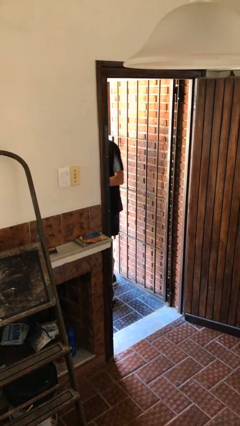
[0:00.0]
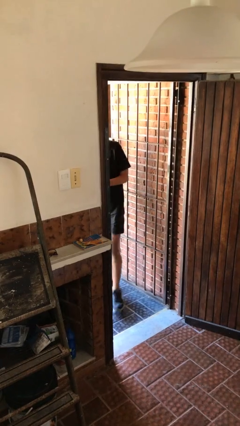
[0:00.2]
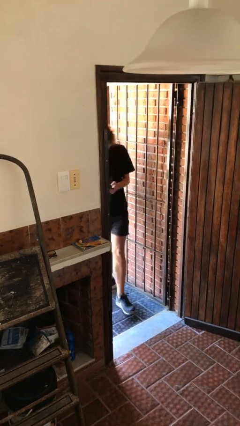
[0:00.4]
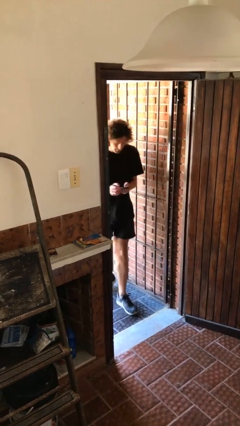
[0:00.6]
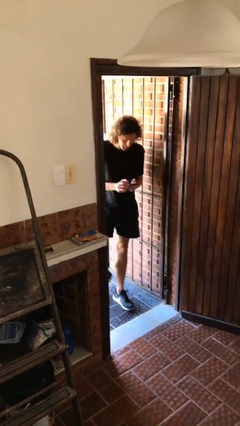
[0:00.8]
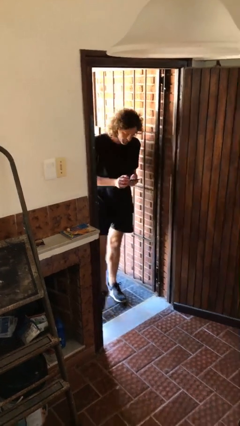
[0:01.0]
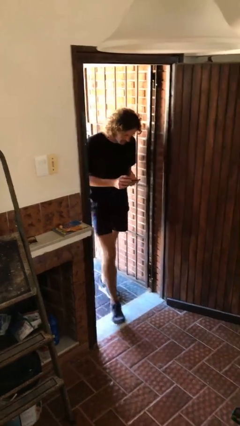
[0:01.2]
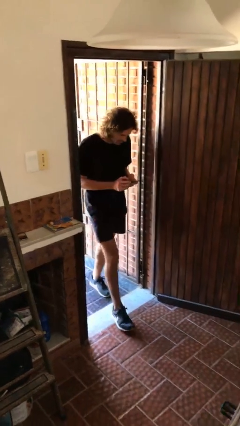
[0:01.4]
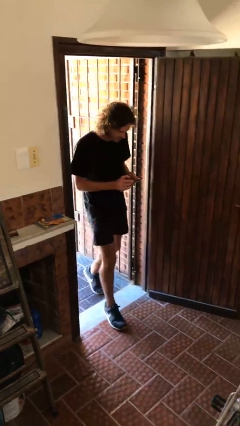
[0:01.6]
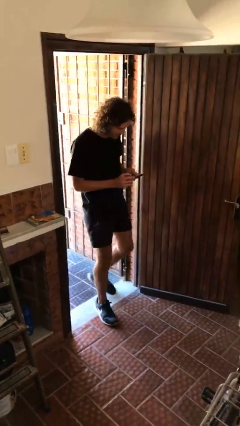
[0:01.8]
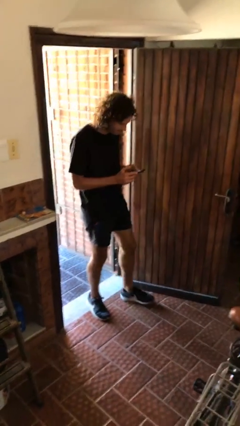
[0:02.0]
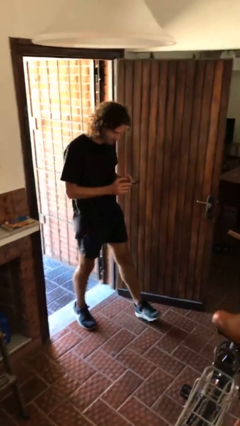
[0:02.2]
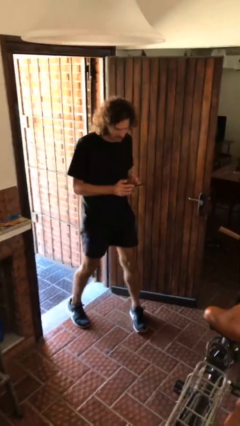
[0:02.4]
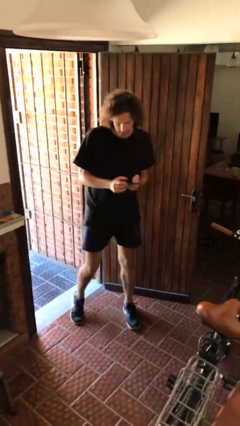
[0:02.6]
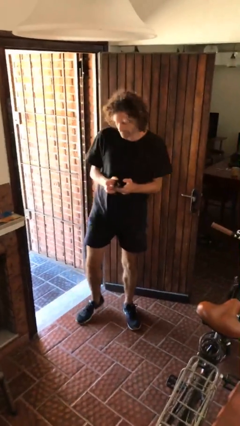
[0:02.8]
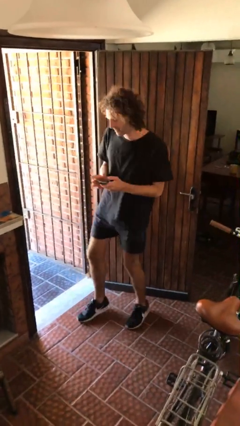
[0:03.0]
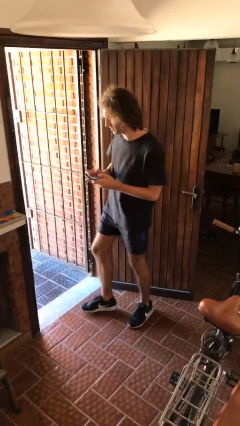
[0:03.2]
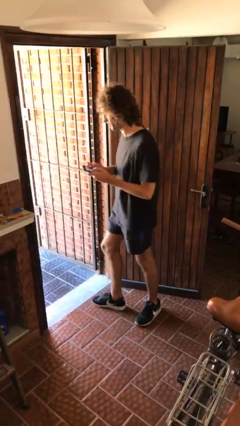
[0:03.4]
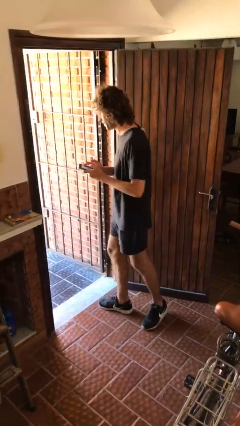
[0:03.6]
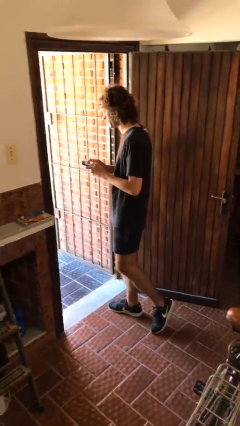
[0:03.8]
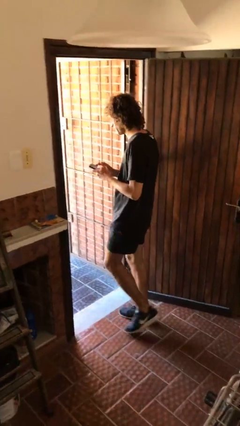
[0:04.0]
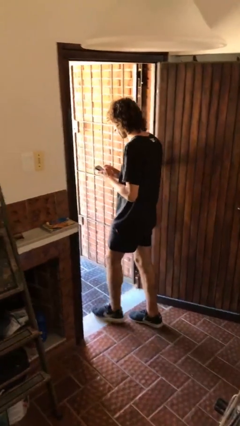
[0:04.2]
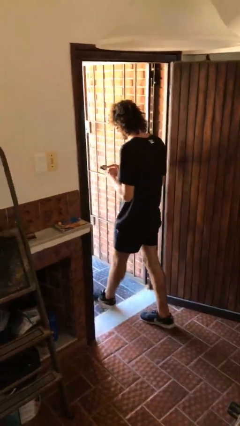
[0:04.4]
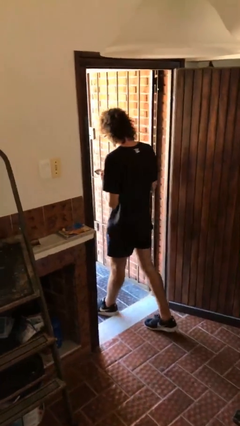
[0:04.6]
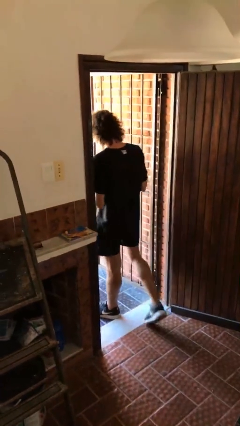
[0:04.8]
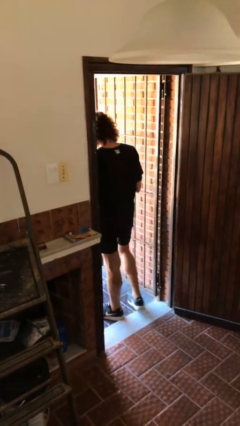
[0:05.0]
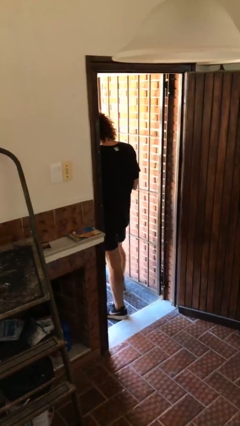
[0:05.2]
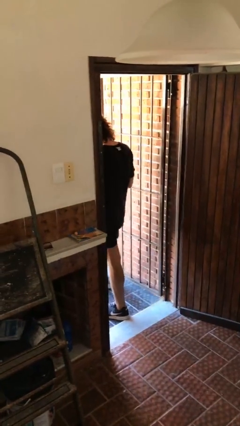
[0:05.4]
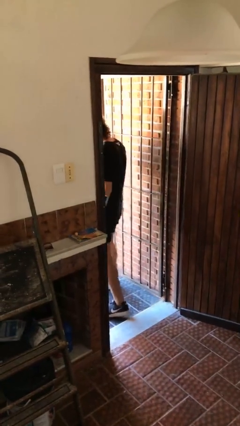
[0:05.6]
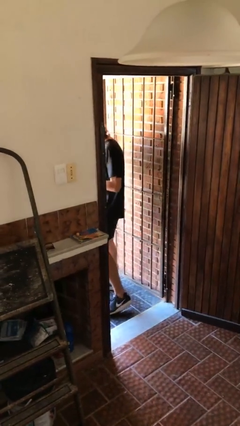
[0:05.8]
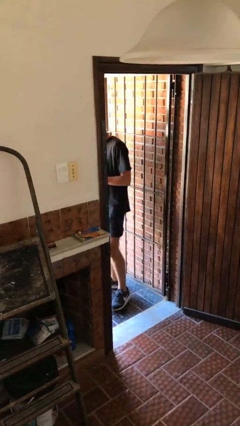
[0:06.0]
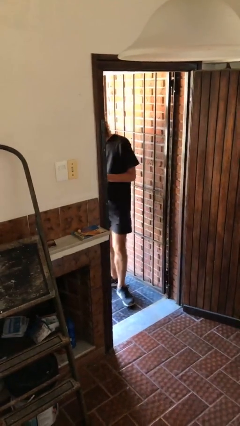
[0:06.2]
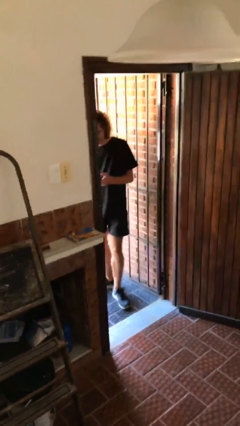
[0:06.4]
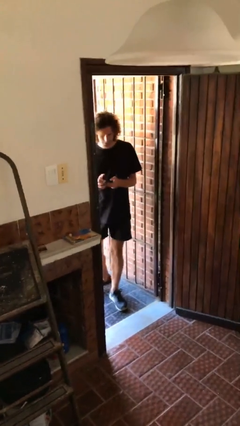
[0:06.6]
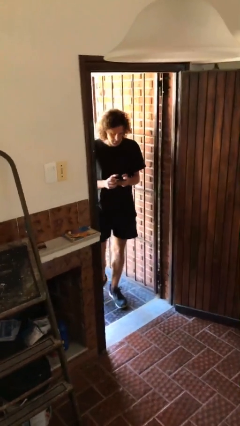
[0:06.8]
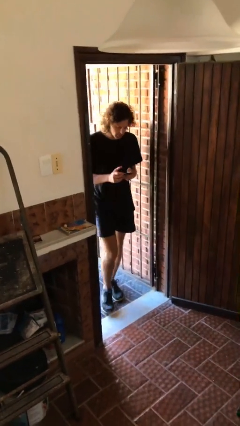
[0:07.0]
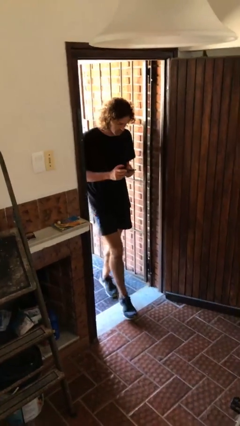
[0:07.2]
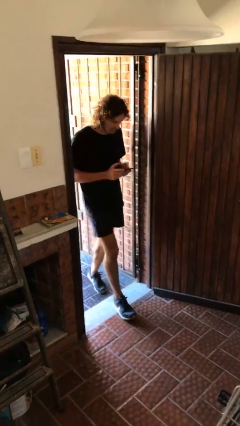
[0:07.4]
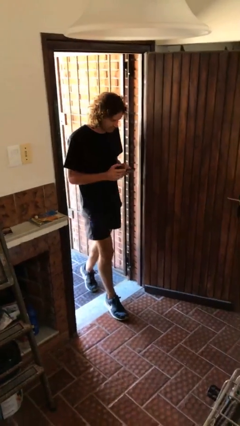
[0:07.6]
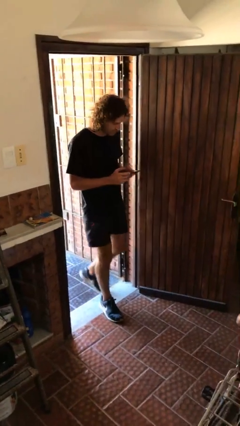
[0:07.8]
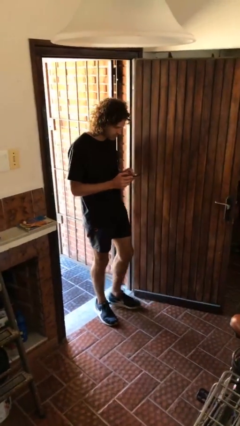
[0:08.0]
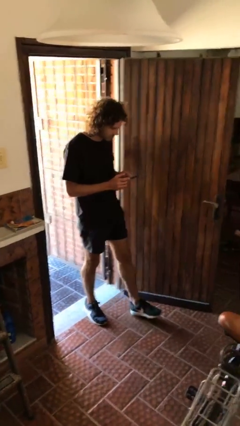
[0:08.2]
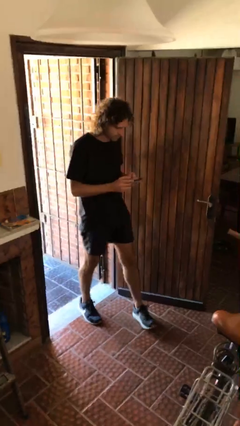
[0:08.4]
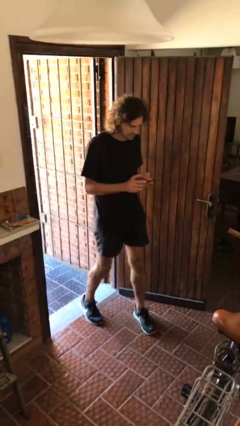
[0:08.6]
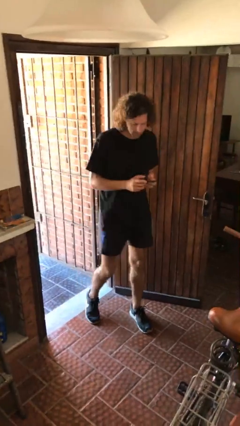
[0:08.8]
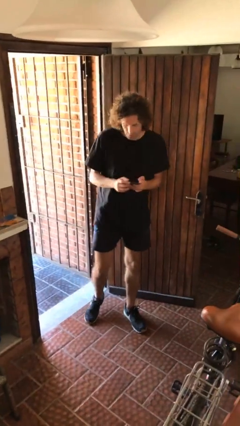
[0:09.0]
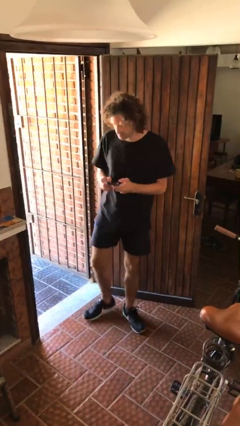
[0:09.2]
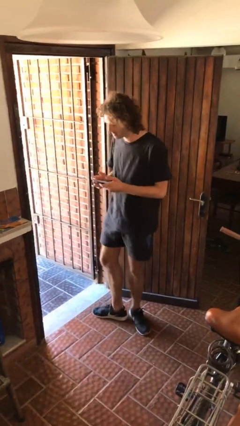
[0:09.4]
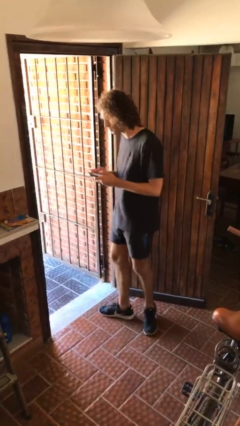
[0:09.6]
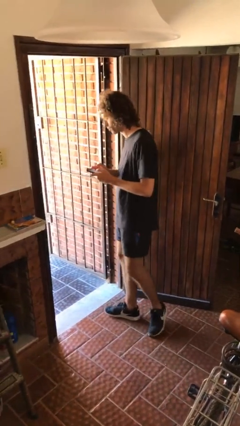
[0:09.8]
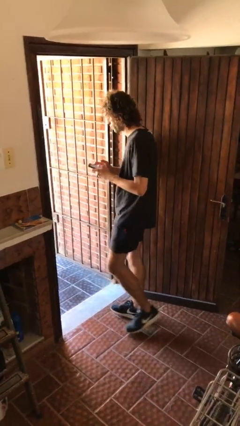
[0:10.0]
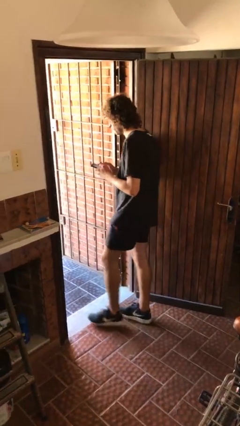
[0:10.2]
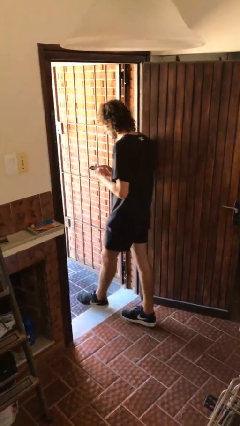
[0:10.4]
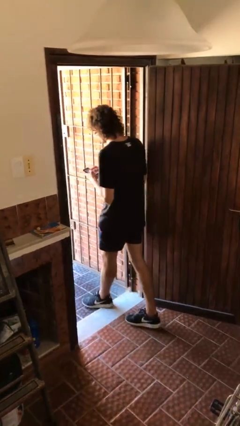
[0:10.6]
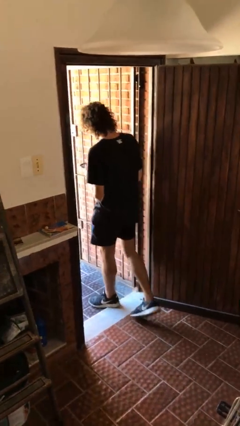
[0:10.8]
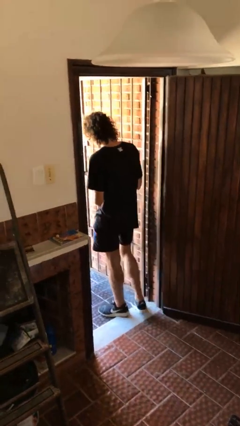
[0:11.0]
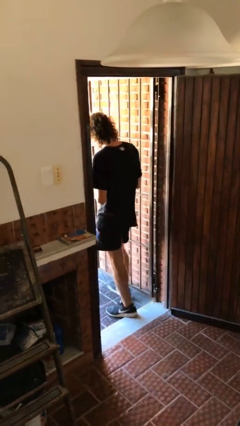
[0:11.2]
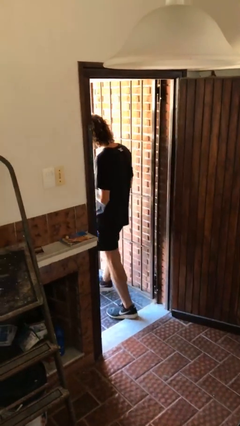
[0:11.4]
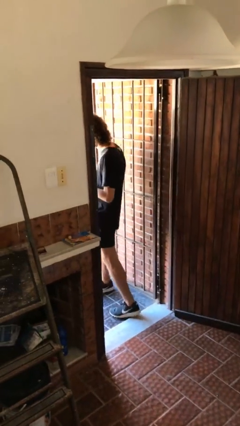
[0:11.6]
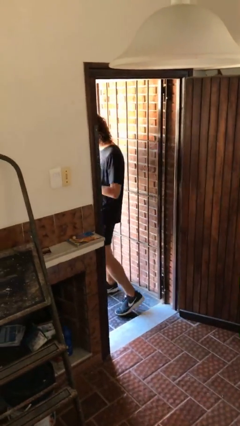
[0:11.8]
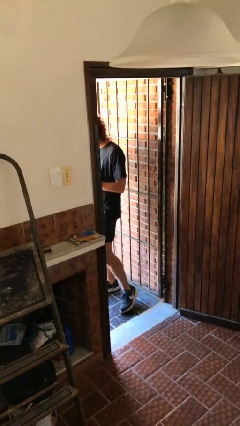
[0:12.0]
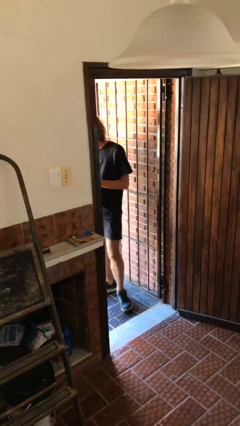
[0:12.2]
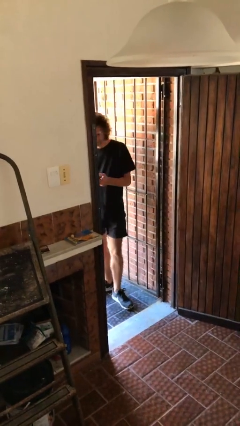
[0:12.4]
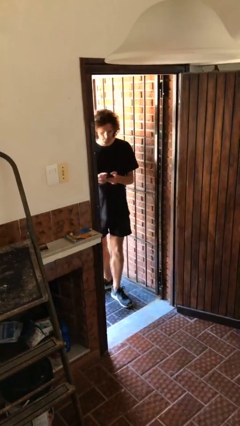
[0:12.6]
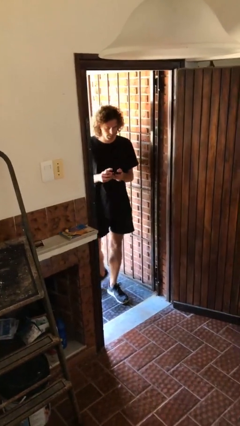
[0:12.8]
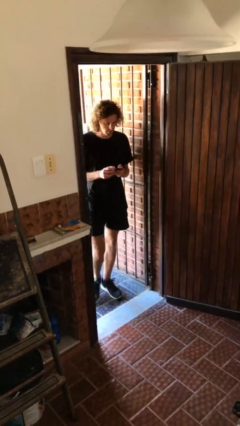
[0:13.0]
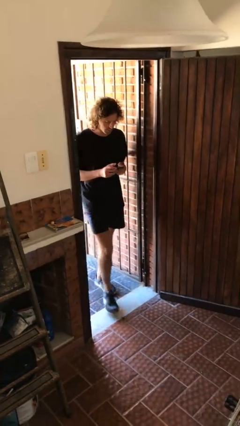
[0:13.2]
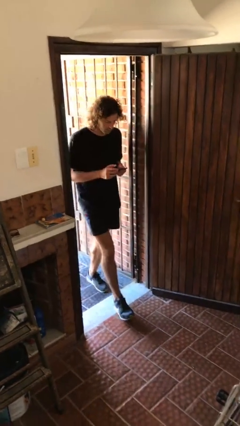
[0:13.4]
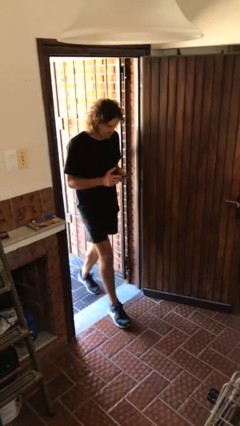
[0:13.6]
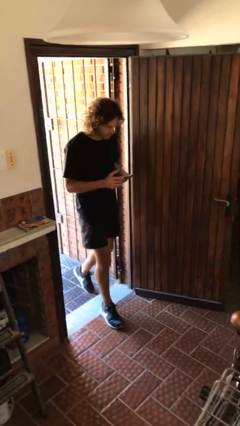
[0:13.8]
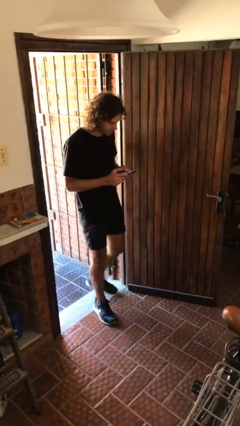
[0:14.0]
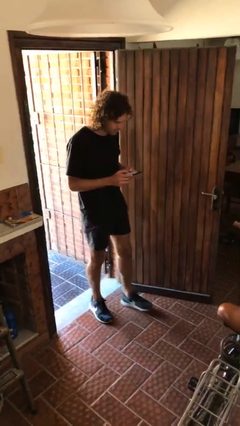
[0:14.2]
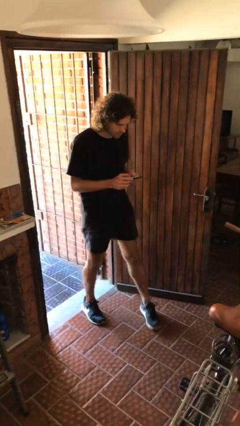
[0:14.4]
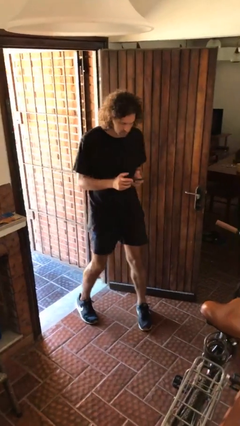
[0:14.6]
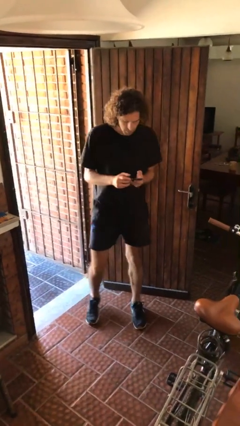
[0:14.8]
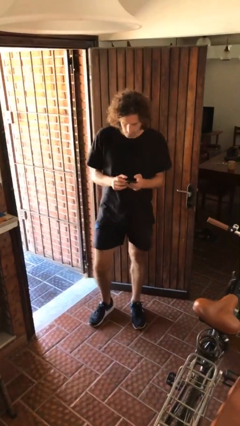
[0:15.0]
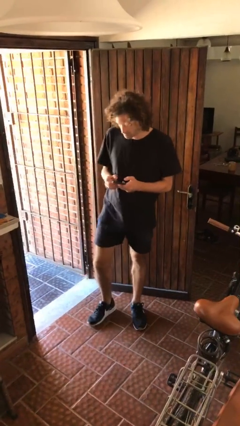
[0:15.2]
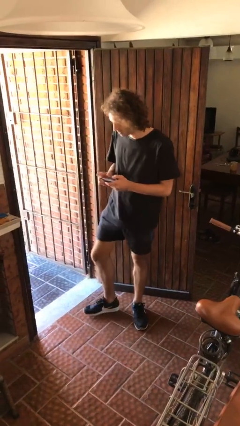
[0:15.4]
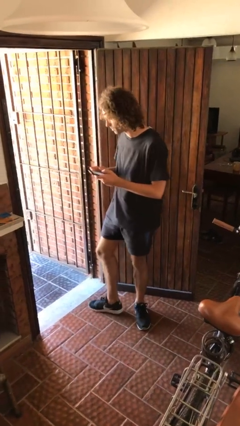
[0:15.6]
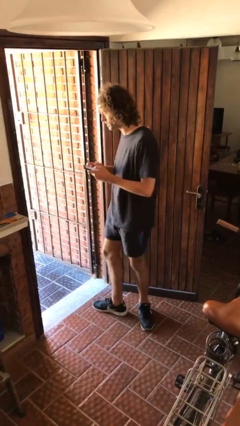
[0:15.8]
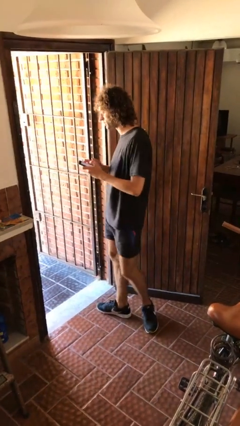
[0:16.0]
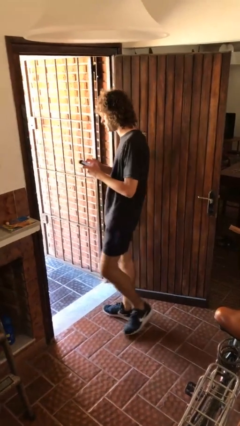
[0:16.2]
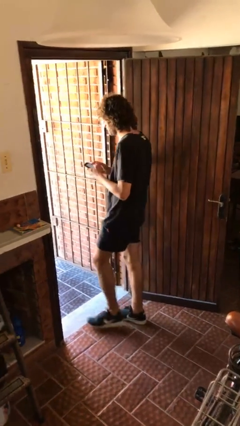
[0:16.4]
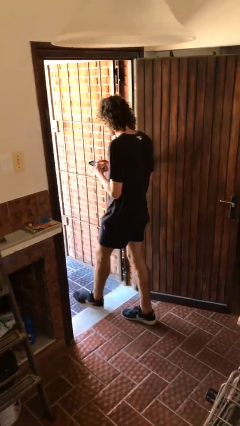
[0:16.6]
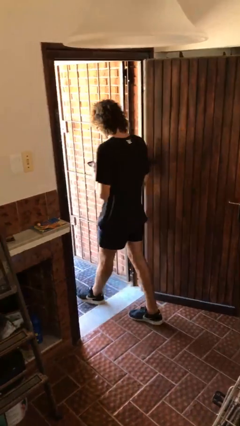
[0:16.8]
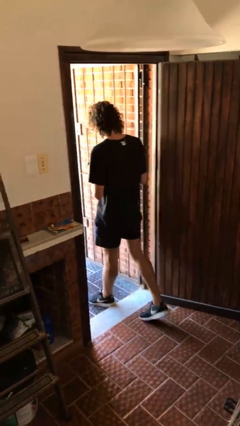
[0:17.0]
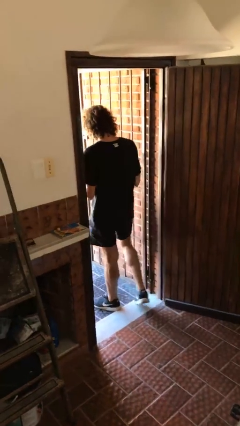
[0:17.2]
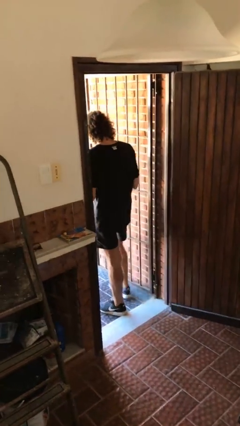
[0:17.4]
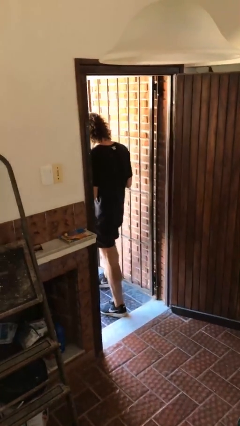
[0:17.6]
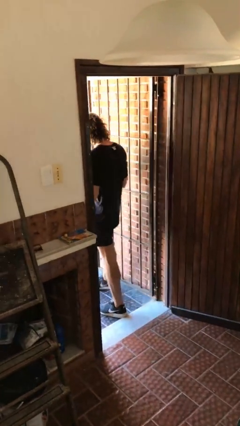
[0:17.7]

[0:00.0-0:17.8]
person texts on phone

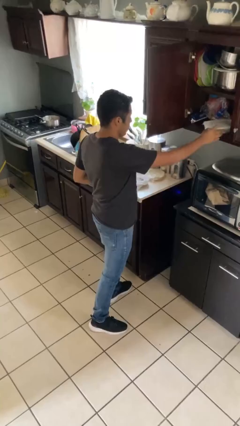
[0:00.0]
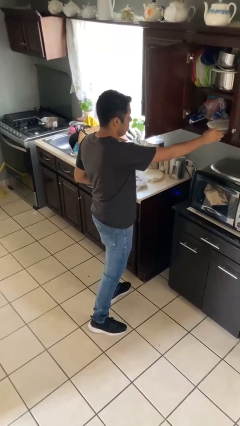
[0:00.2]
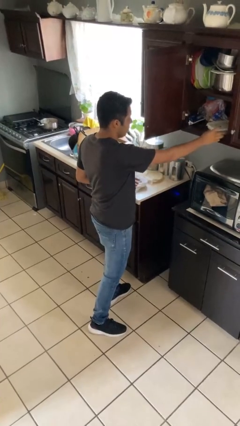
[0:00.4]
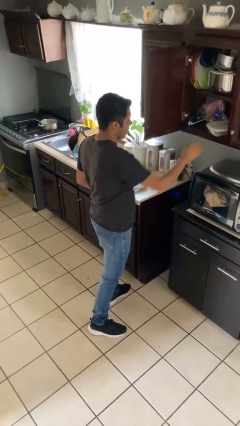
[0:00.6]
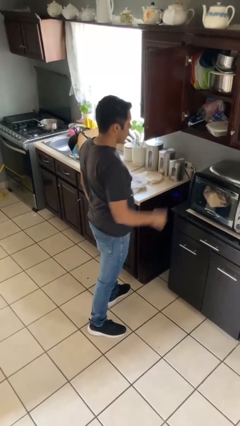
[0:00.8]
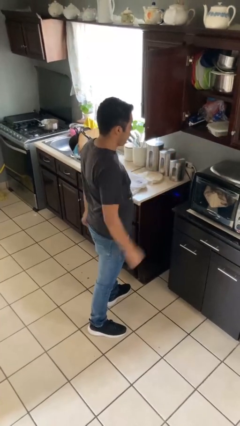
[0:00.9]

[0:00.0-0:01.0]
person puts down object into cabinet
